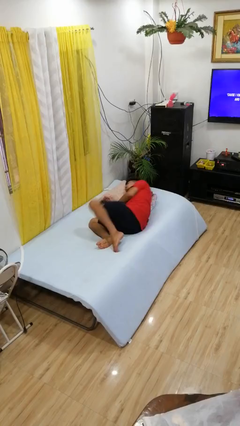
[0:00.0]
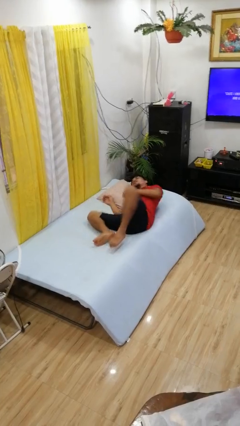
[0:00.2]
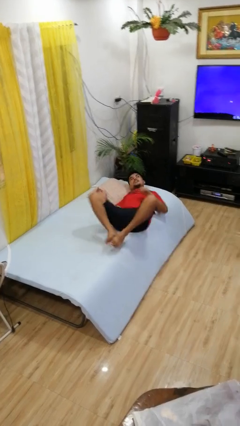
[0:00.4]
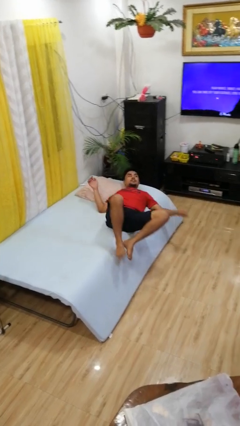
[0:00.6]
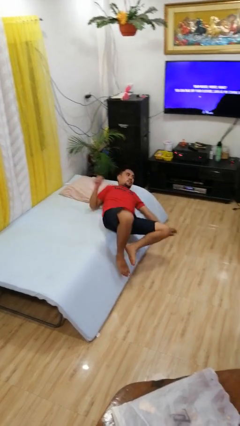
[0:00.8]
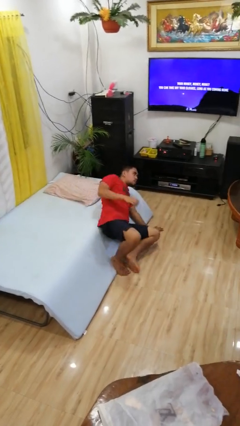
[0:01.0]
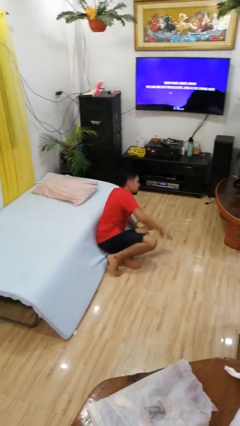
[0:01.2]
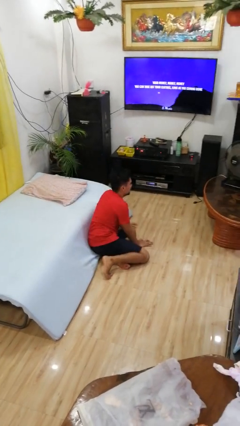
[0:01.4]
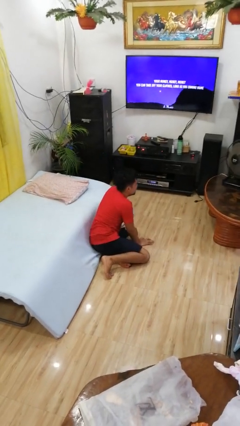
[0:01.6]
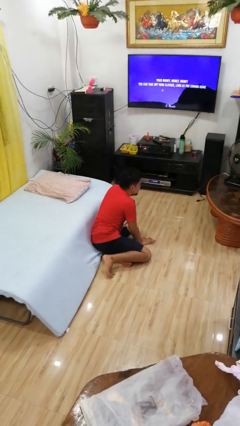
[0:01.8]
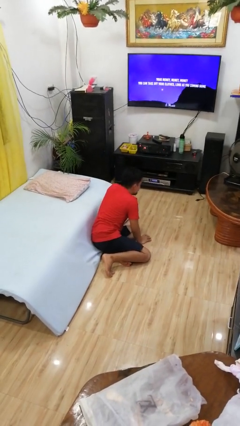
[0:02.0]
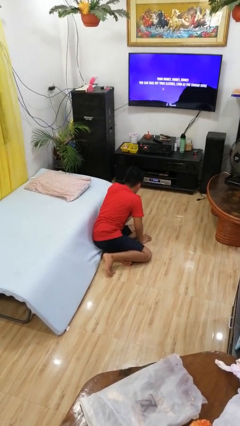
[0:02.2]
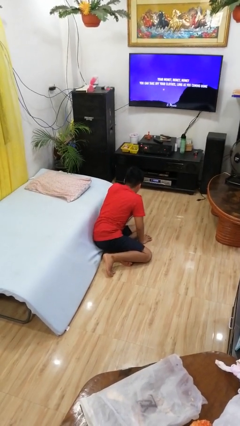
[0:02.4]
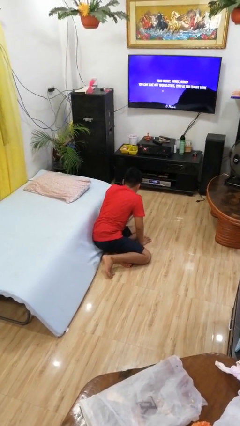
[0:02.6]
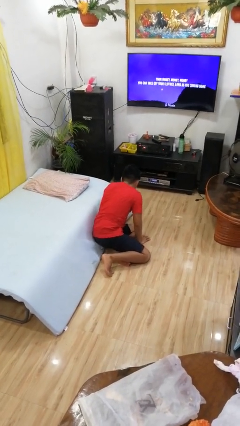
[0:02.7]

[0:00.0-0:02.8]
person falls from bed

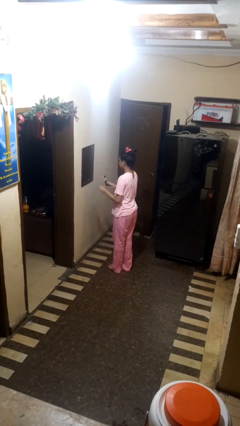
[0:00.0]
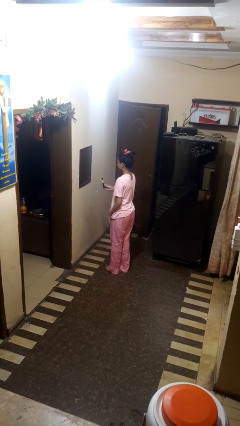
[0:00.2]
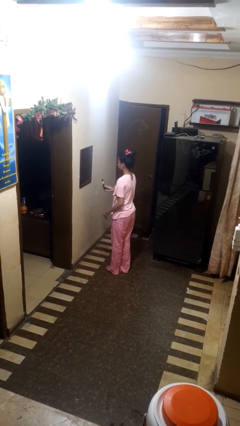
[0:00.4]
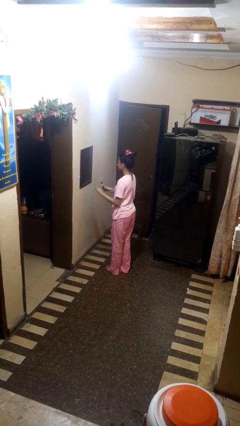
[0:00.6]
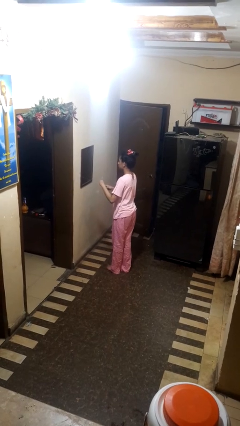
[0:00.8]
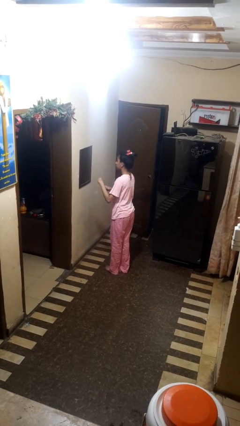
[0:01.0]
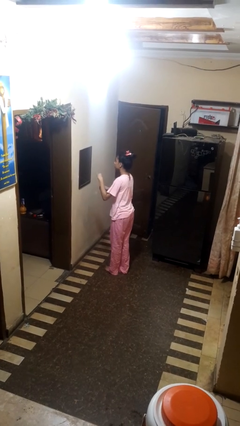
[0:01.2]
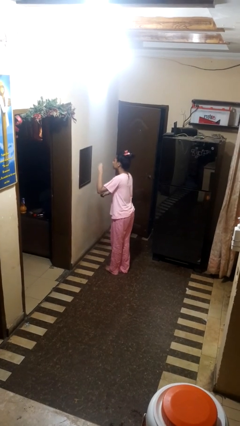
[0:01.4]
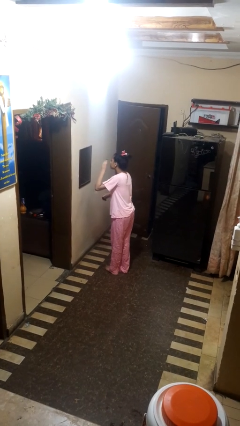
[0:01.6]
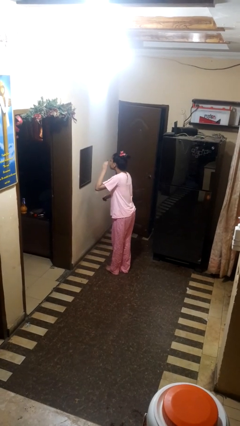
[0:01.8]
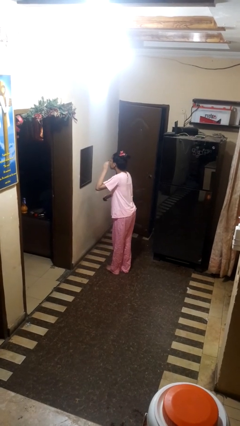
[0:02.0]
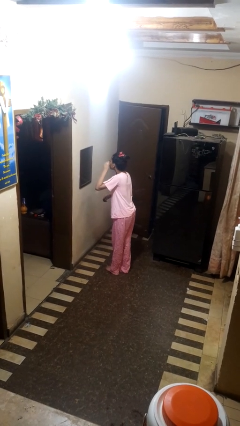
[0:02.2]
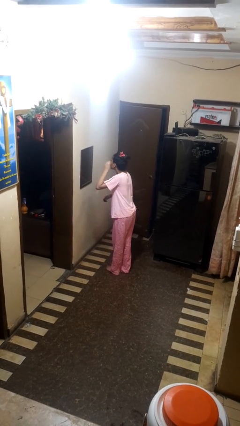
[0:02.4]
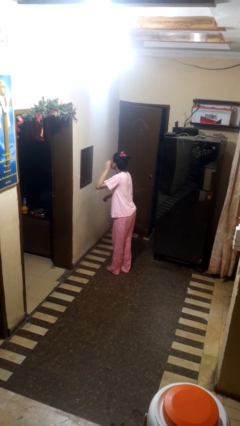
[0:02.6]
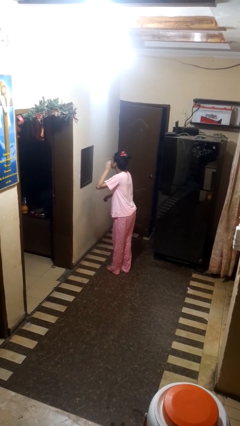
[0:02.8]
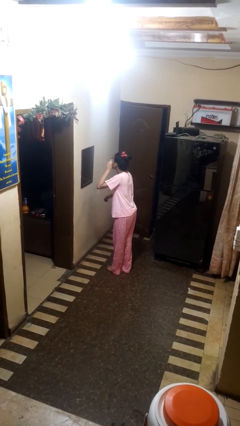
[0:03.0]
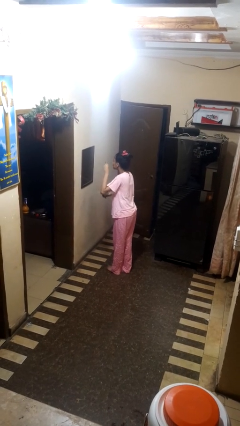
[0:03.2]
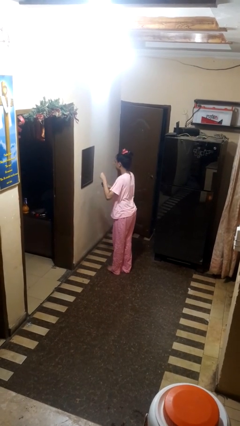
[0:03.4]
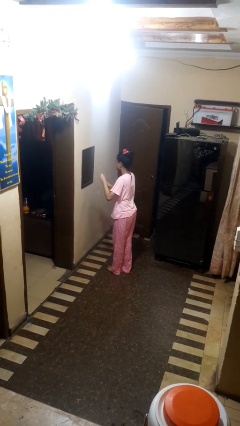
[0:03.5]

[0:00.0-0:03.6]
person applies eye makeup

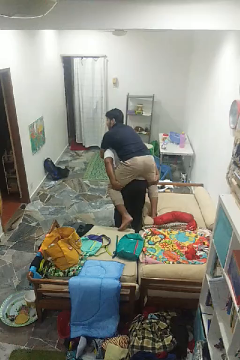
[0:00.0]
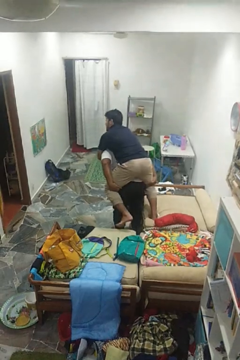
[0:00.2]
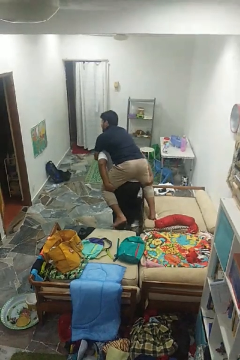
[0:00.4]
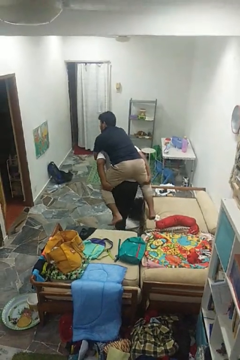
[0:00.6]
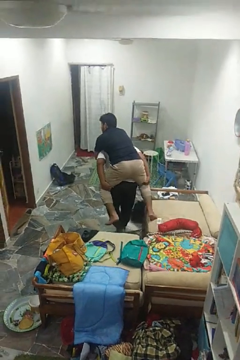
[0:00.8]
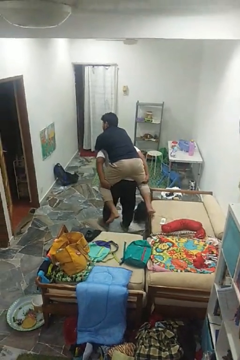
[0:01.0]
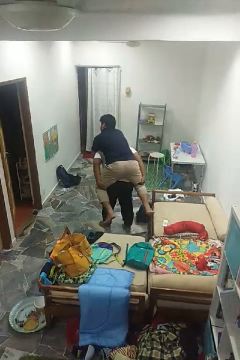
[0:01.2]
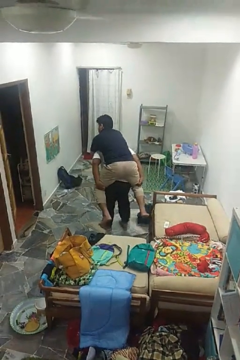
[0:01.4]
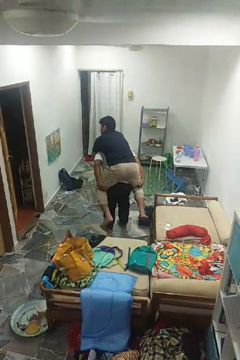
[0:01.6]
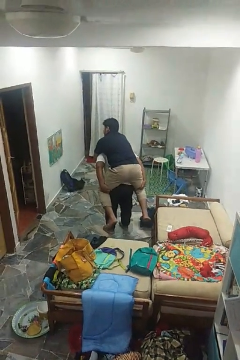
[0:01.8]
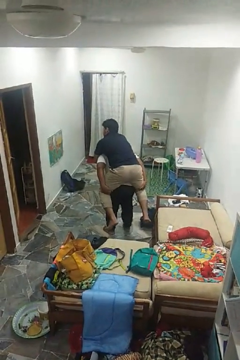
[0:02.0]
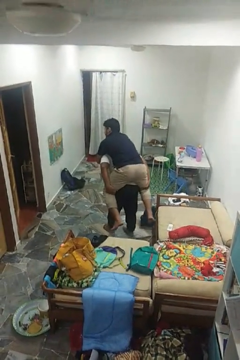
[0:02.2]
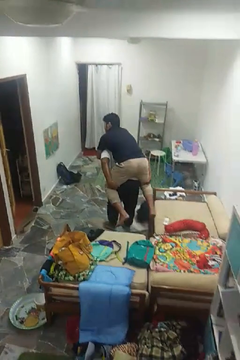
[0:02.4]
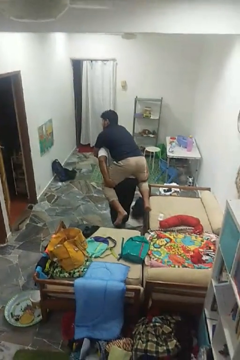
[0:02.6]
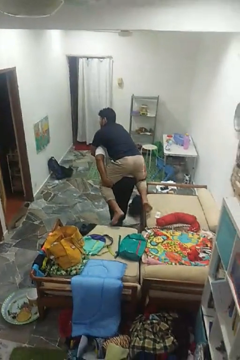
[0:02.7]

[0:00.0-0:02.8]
person carries person on back

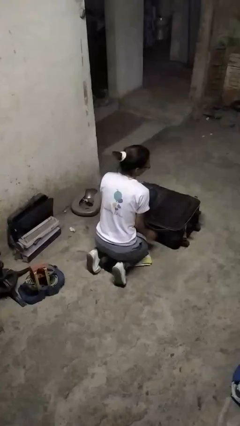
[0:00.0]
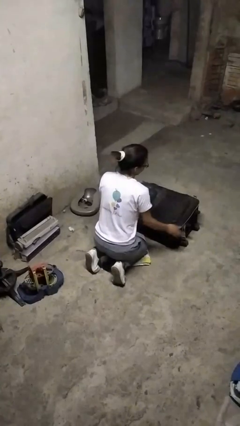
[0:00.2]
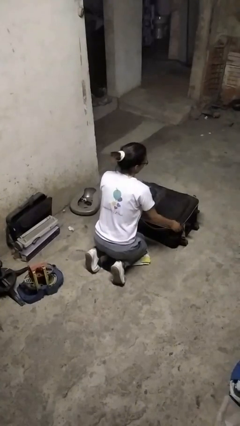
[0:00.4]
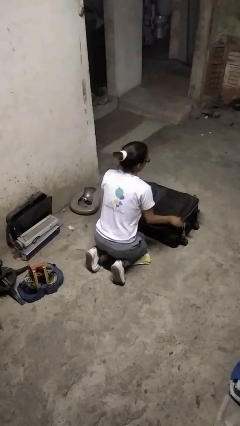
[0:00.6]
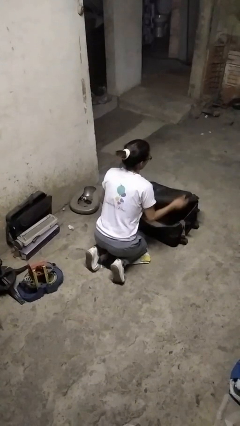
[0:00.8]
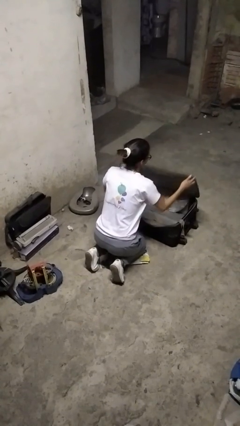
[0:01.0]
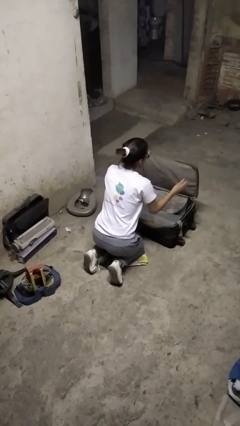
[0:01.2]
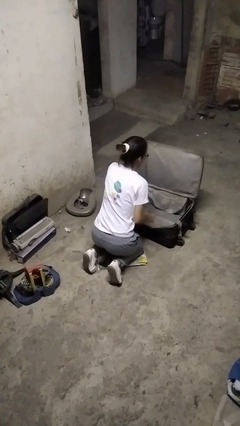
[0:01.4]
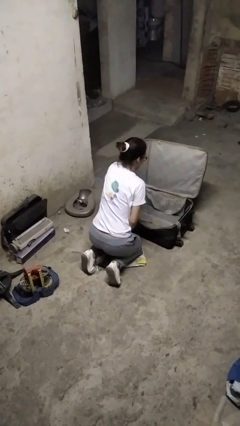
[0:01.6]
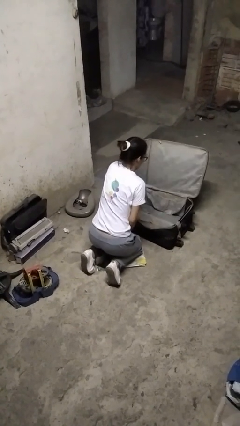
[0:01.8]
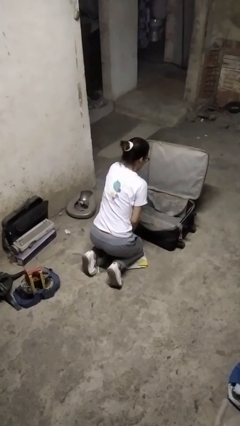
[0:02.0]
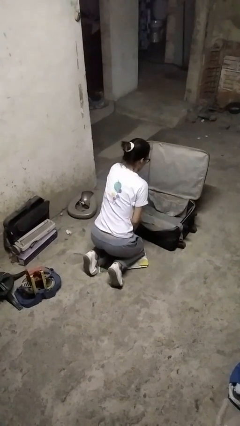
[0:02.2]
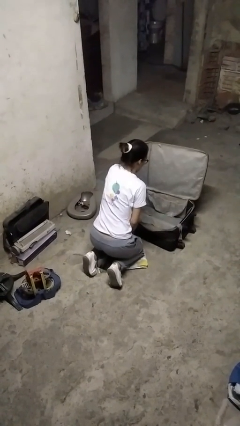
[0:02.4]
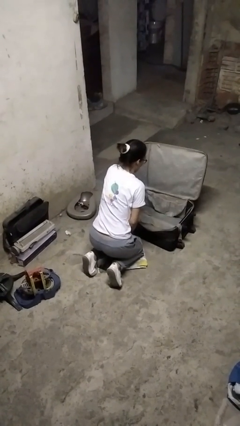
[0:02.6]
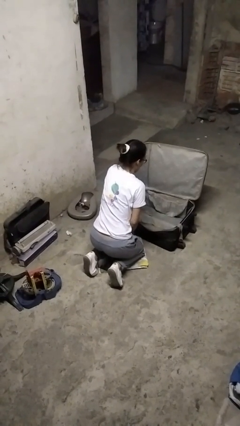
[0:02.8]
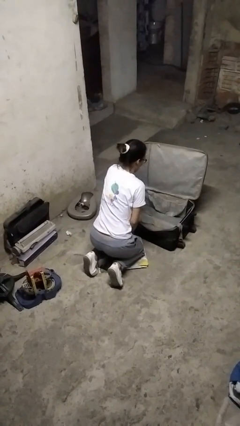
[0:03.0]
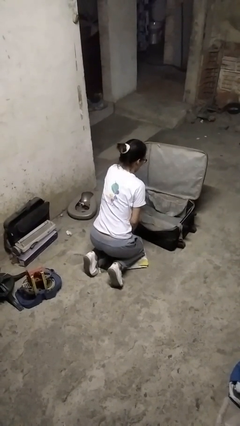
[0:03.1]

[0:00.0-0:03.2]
person opens suitcase

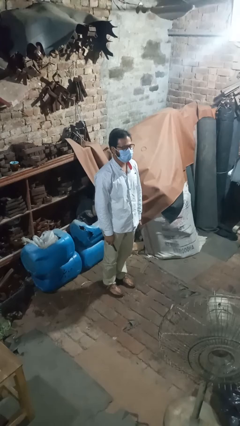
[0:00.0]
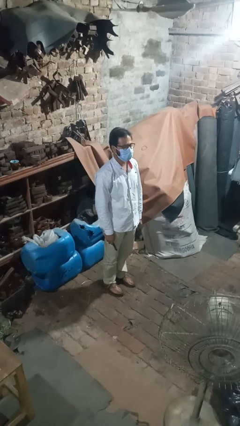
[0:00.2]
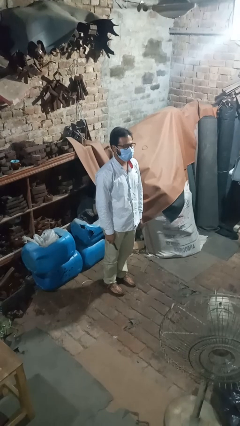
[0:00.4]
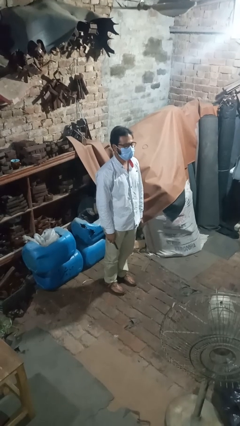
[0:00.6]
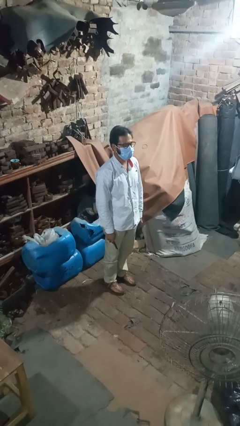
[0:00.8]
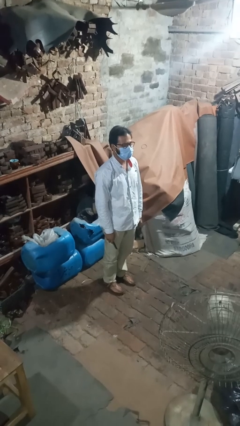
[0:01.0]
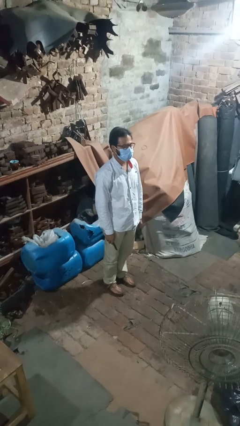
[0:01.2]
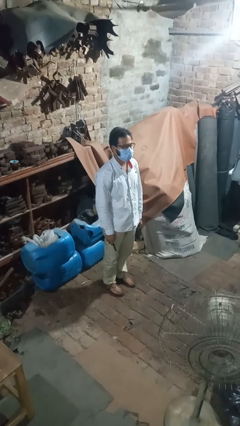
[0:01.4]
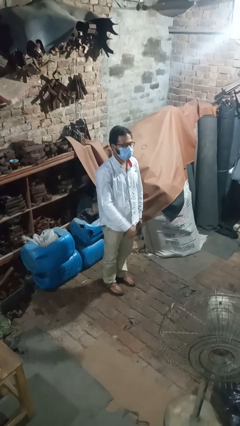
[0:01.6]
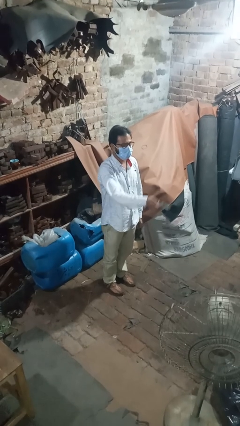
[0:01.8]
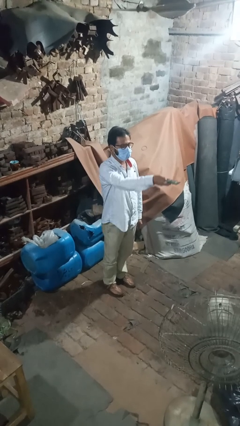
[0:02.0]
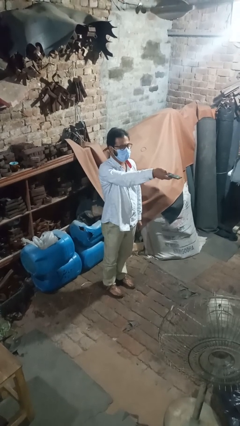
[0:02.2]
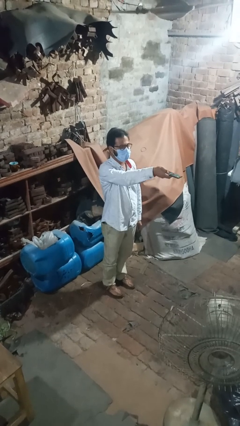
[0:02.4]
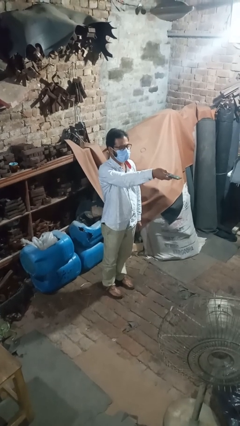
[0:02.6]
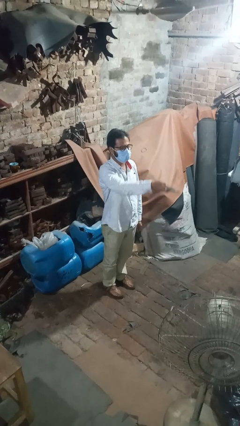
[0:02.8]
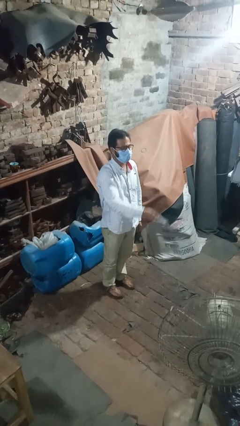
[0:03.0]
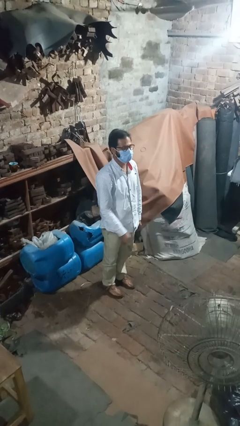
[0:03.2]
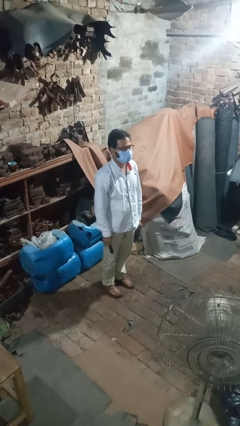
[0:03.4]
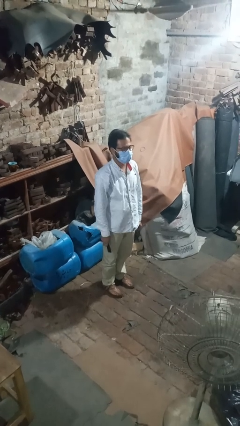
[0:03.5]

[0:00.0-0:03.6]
person uses television remote

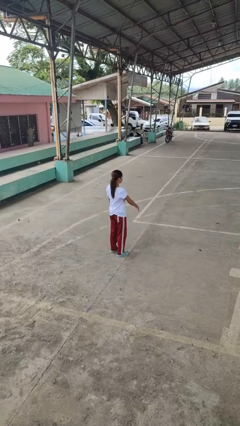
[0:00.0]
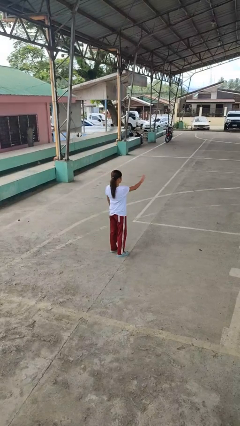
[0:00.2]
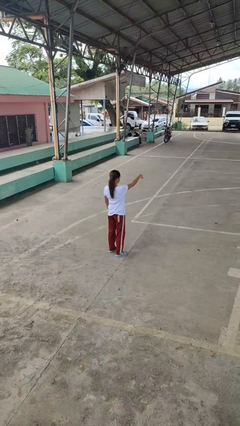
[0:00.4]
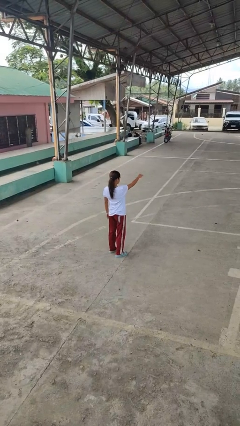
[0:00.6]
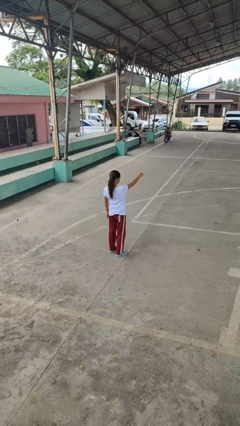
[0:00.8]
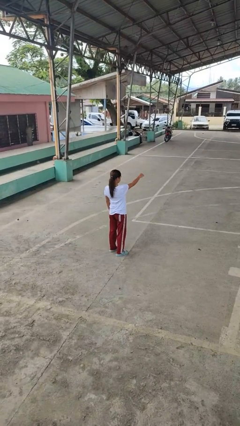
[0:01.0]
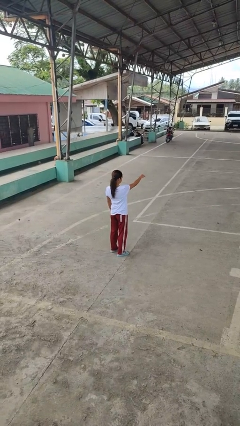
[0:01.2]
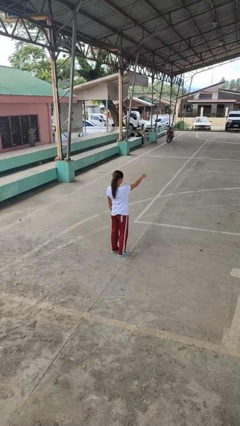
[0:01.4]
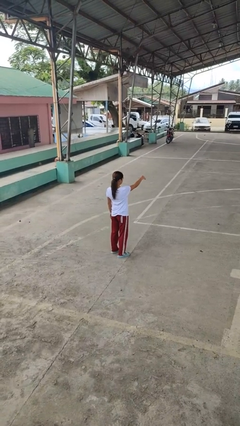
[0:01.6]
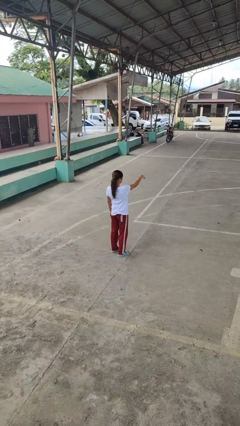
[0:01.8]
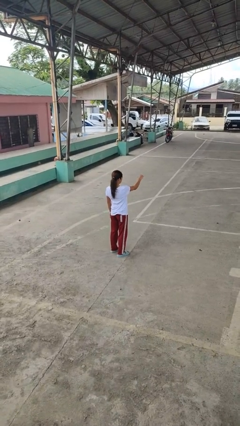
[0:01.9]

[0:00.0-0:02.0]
person gestures come here
